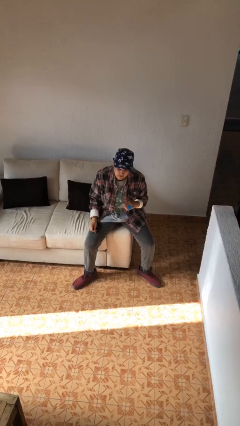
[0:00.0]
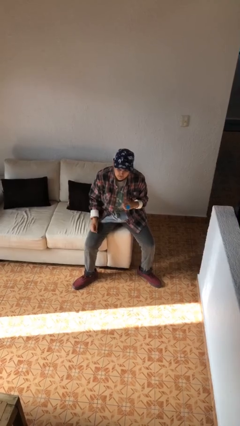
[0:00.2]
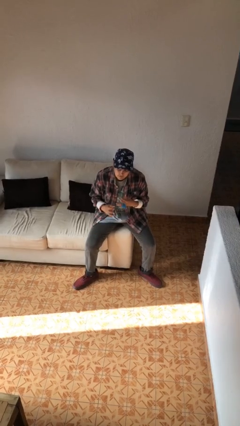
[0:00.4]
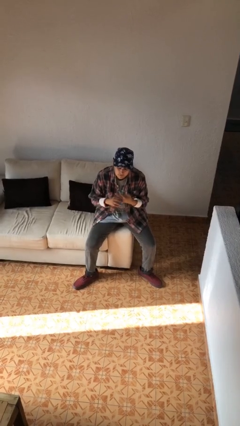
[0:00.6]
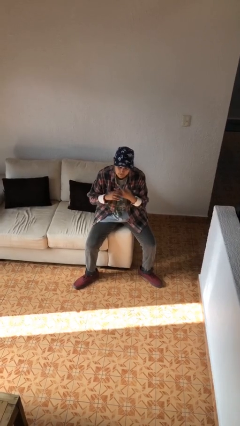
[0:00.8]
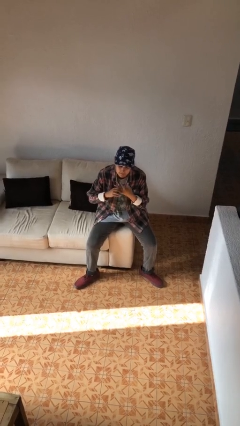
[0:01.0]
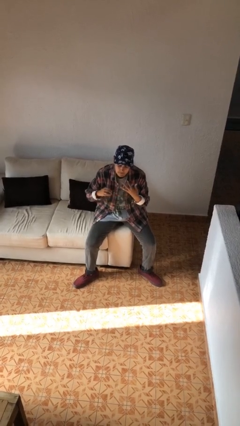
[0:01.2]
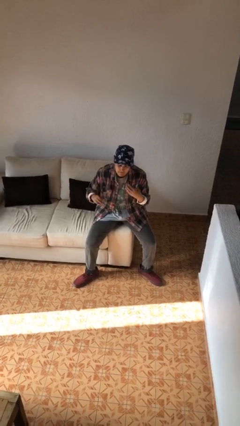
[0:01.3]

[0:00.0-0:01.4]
person takes off ring

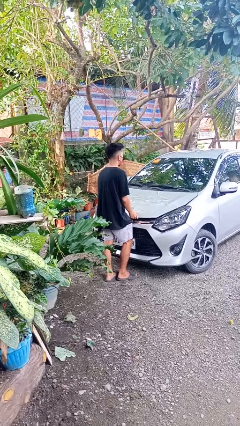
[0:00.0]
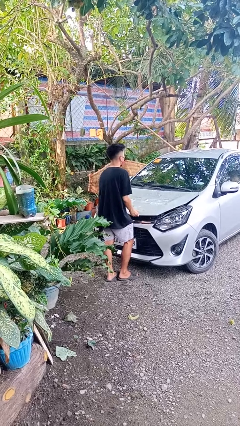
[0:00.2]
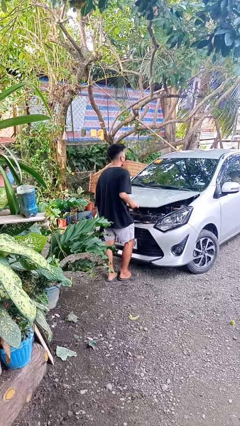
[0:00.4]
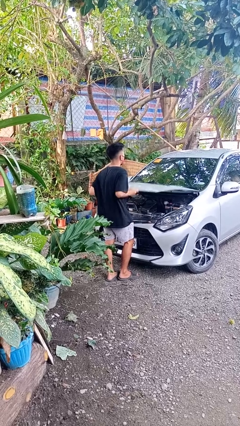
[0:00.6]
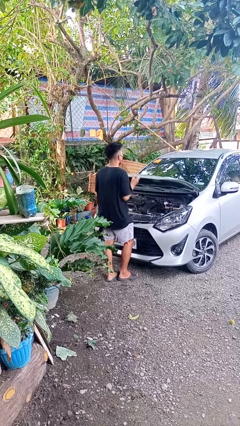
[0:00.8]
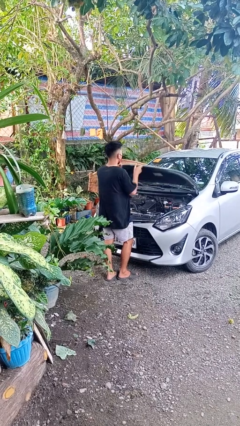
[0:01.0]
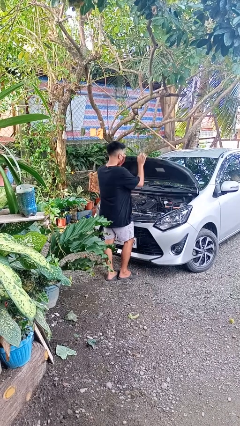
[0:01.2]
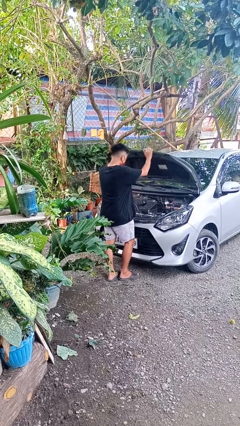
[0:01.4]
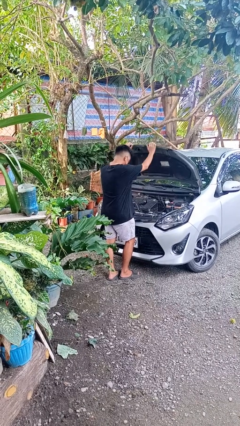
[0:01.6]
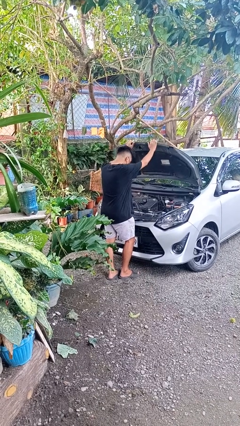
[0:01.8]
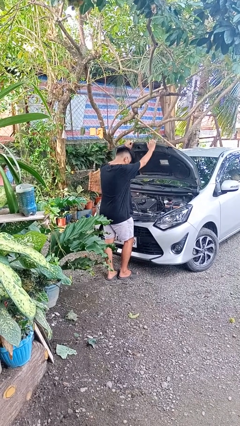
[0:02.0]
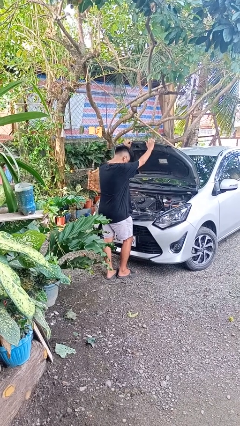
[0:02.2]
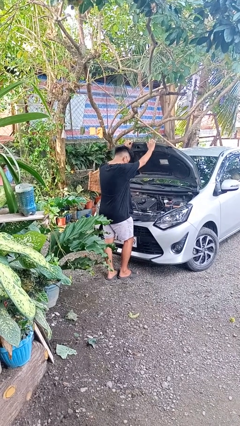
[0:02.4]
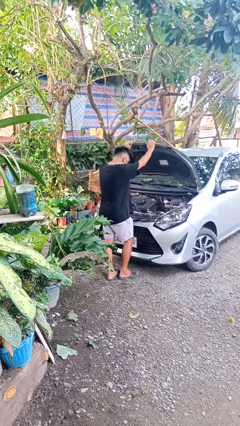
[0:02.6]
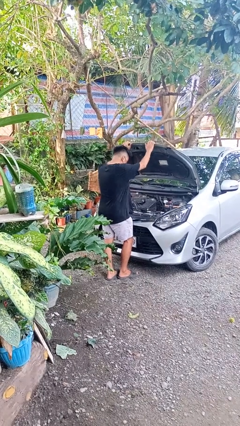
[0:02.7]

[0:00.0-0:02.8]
person opens car hood

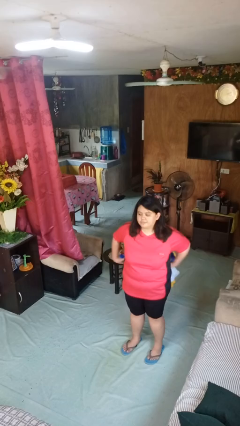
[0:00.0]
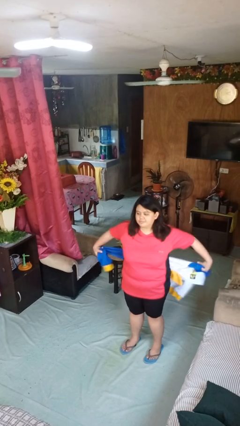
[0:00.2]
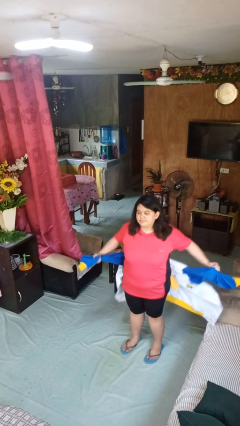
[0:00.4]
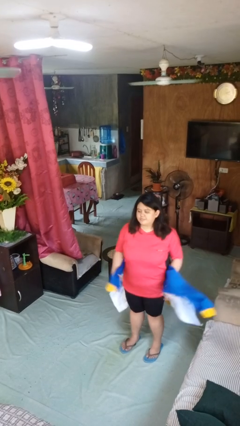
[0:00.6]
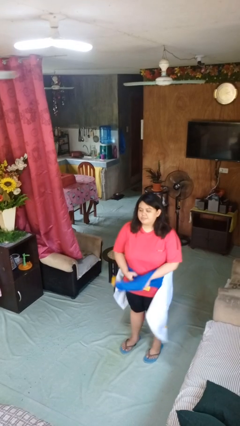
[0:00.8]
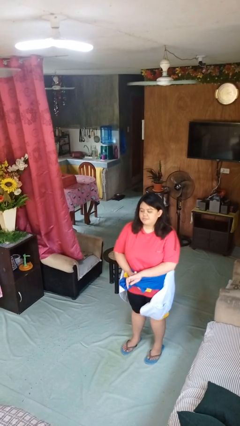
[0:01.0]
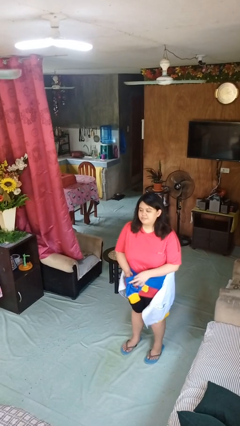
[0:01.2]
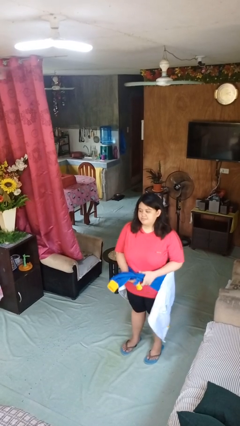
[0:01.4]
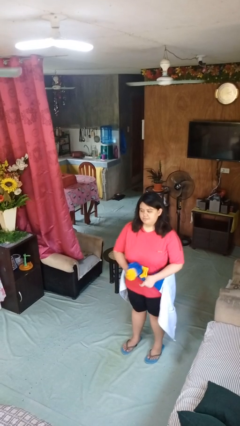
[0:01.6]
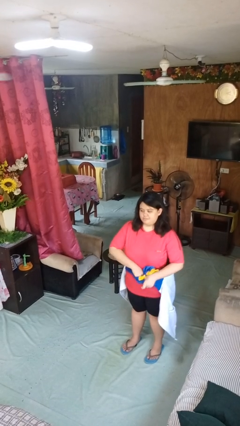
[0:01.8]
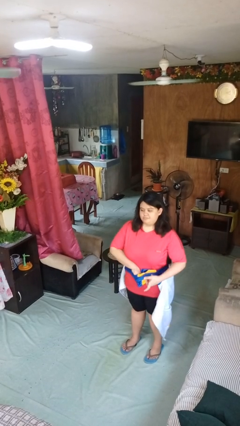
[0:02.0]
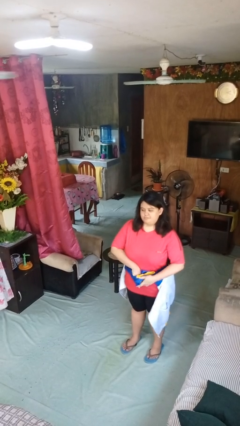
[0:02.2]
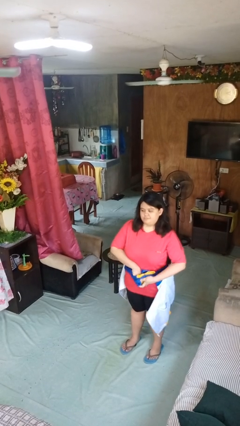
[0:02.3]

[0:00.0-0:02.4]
person ties jacket around waist

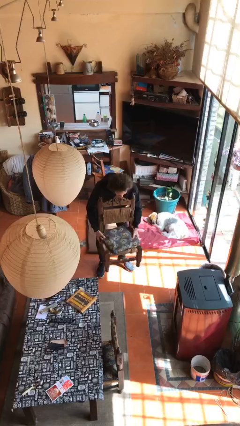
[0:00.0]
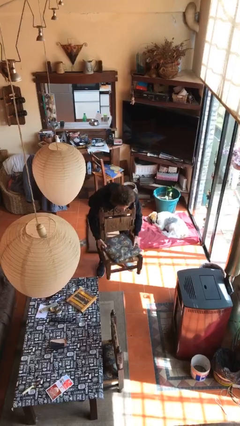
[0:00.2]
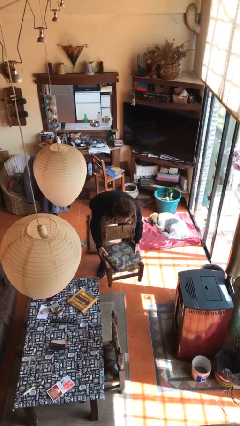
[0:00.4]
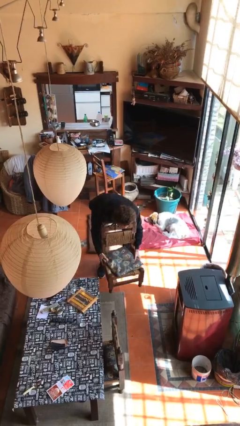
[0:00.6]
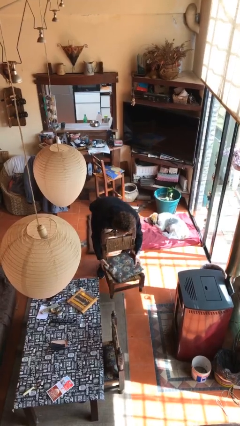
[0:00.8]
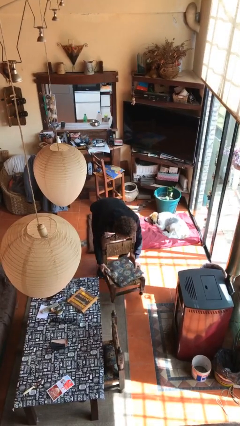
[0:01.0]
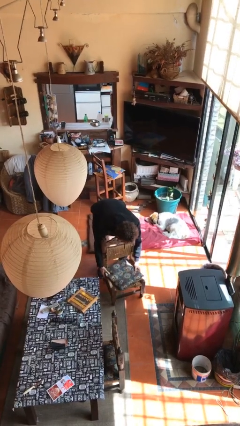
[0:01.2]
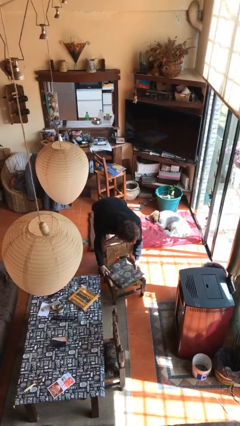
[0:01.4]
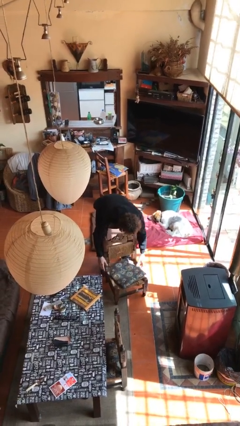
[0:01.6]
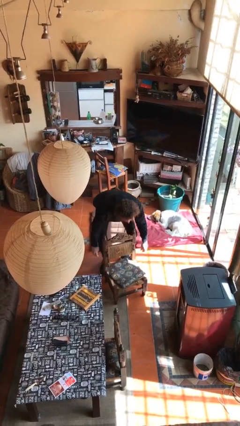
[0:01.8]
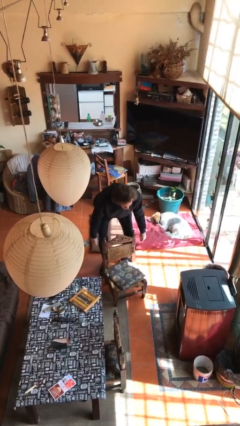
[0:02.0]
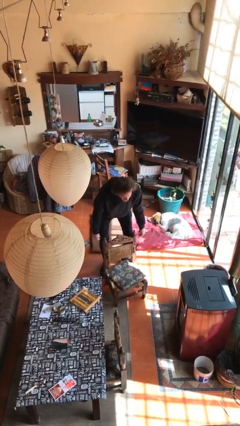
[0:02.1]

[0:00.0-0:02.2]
person puts down object on floor

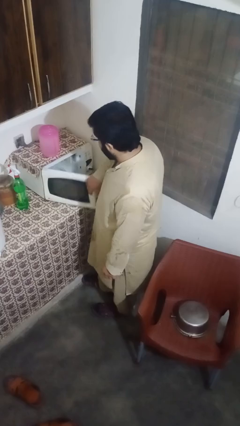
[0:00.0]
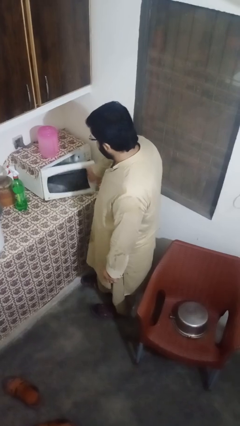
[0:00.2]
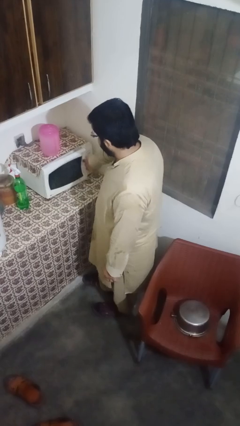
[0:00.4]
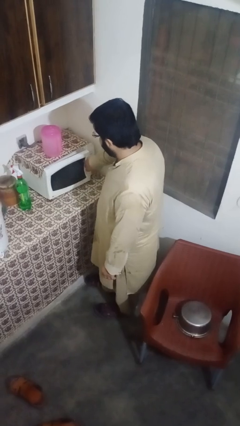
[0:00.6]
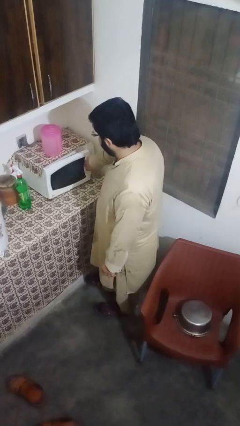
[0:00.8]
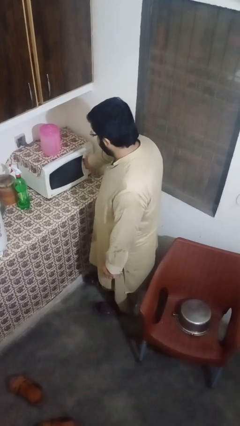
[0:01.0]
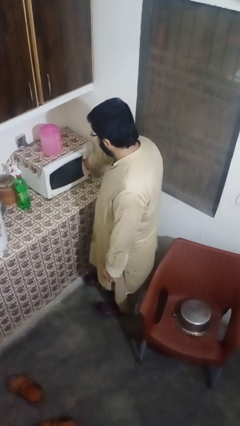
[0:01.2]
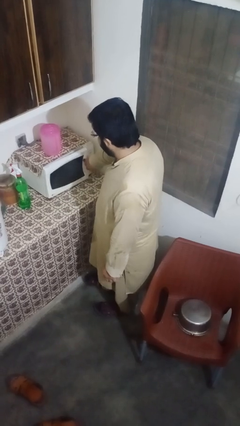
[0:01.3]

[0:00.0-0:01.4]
person closes microwave

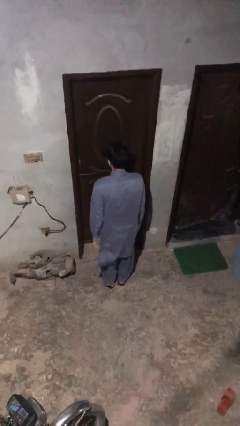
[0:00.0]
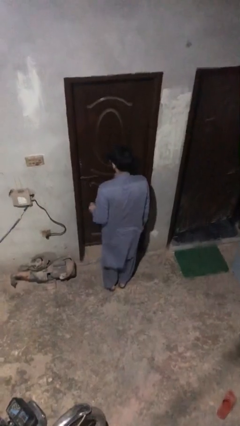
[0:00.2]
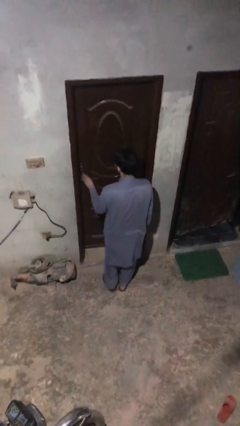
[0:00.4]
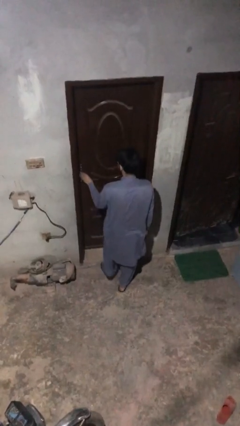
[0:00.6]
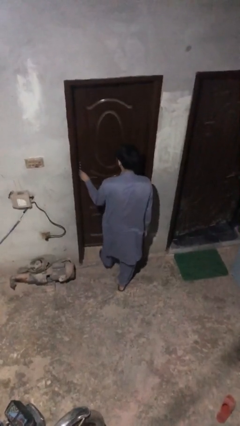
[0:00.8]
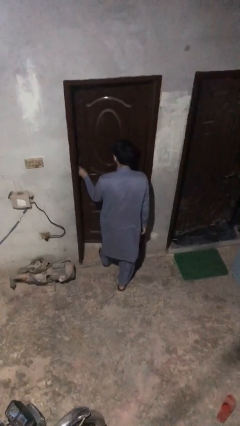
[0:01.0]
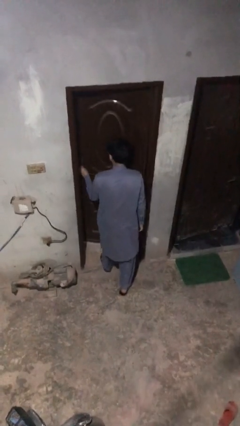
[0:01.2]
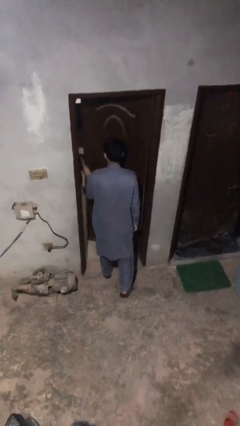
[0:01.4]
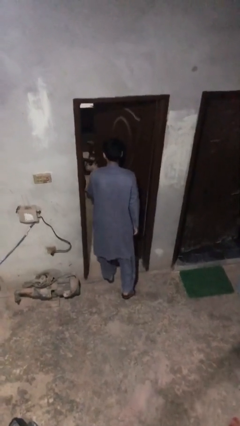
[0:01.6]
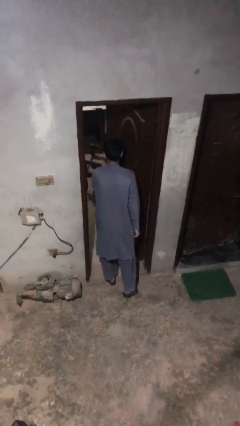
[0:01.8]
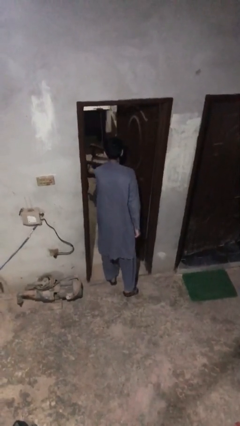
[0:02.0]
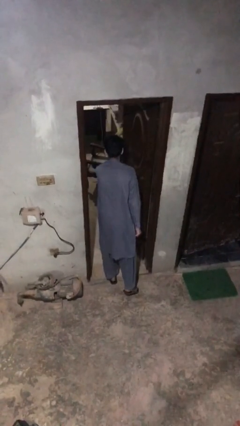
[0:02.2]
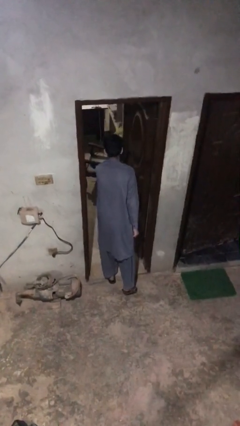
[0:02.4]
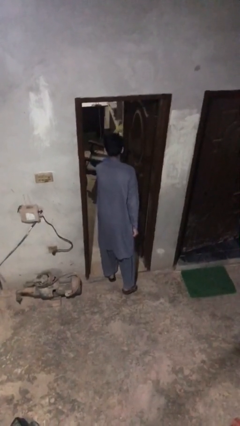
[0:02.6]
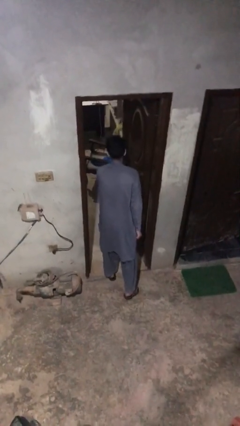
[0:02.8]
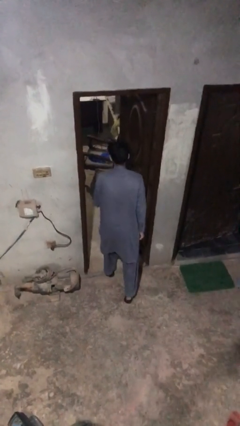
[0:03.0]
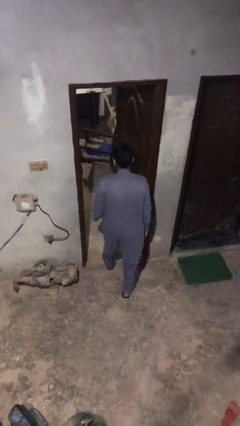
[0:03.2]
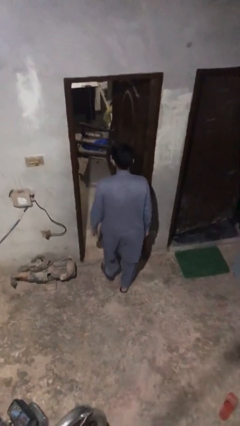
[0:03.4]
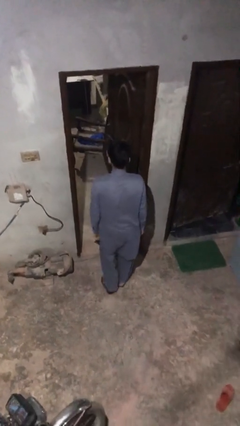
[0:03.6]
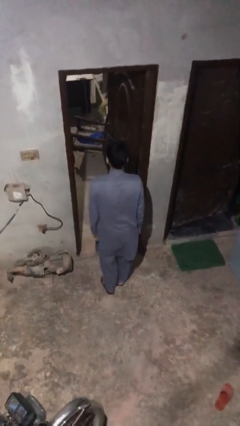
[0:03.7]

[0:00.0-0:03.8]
person opens facility door

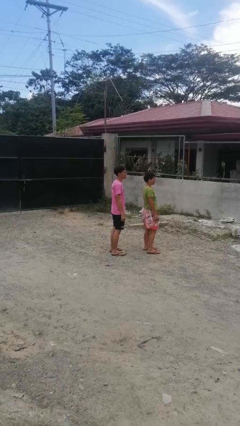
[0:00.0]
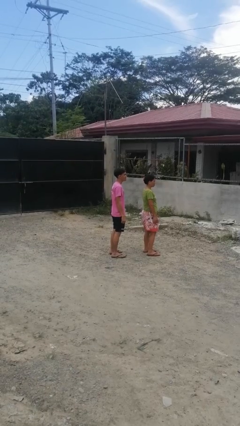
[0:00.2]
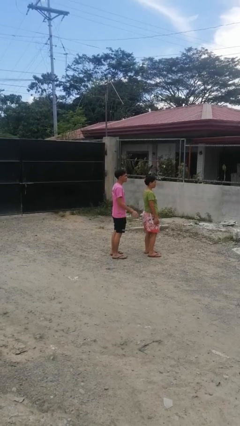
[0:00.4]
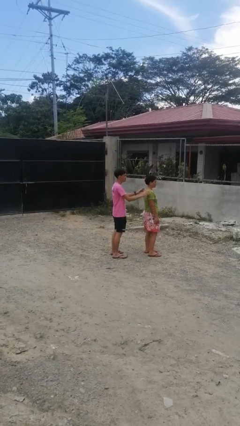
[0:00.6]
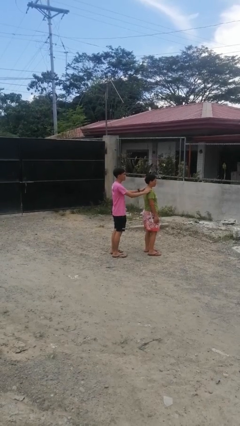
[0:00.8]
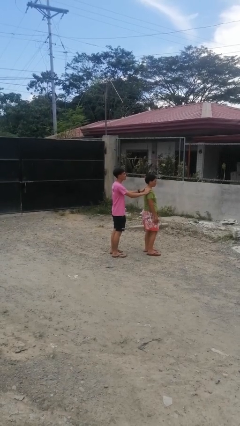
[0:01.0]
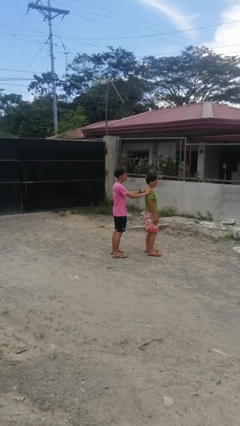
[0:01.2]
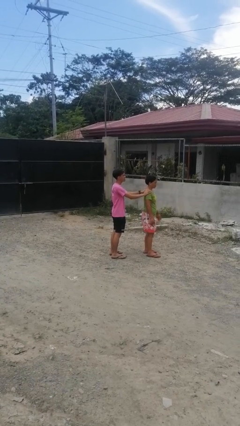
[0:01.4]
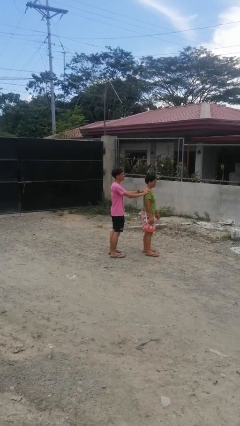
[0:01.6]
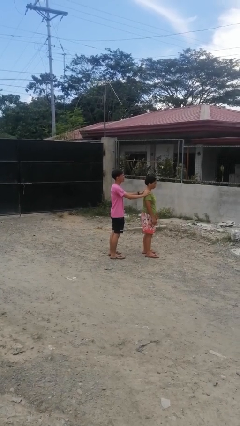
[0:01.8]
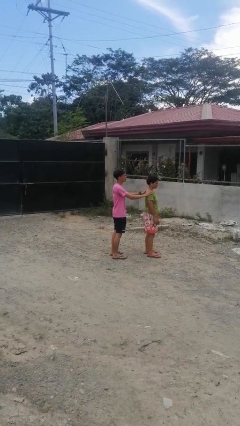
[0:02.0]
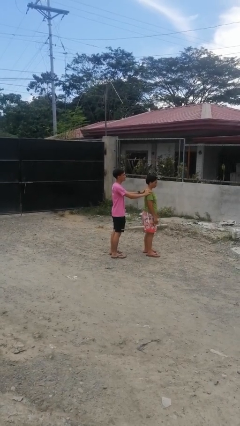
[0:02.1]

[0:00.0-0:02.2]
person grabs person by shoulder

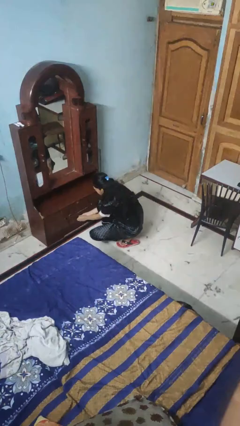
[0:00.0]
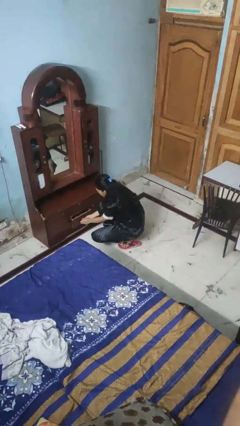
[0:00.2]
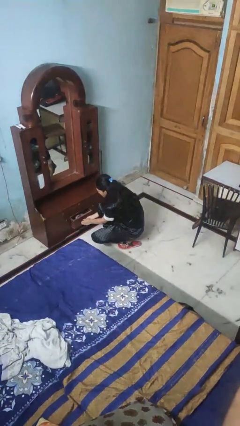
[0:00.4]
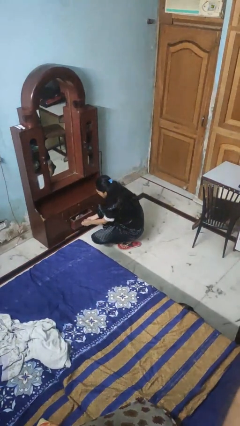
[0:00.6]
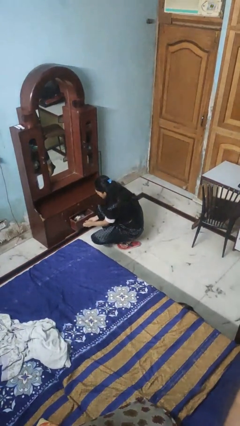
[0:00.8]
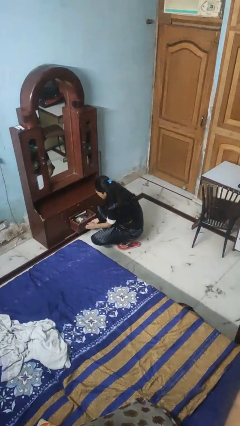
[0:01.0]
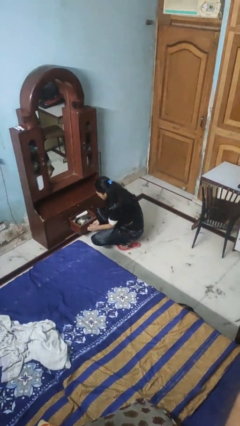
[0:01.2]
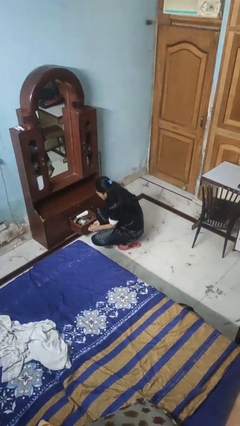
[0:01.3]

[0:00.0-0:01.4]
person opens dresser drawer
